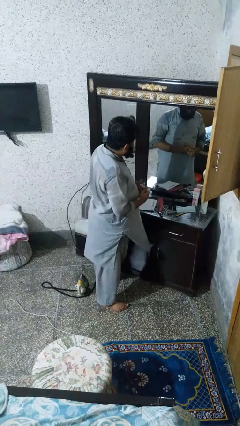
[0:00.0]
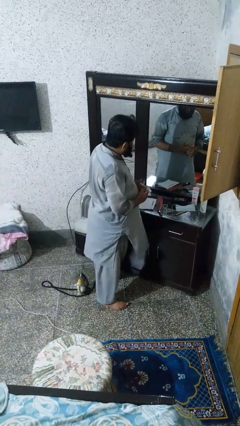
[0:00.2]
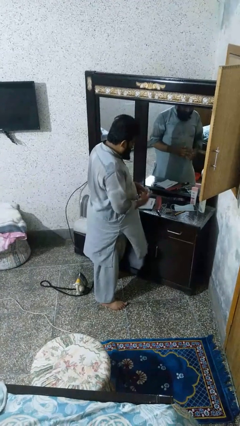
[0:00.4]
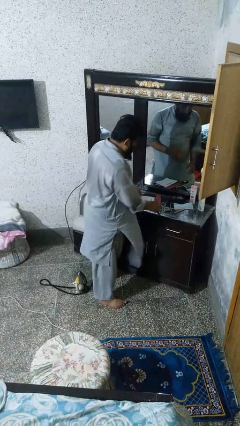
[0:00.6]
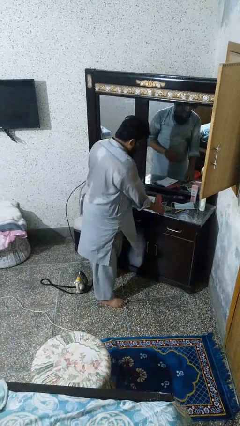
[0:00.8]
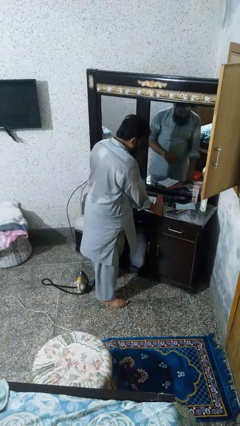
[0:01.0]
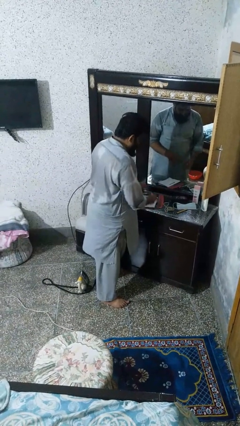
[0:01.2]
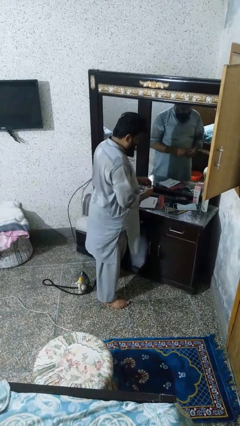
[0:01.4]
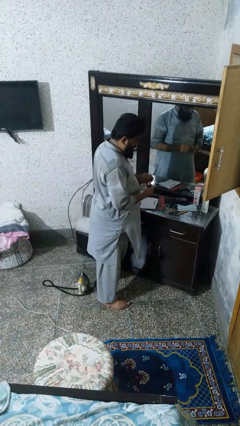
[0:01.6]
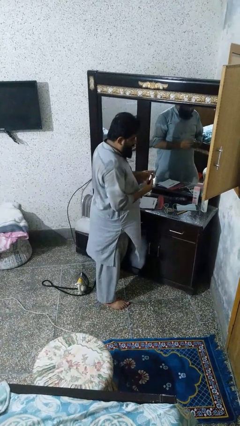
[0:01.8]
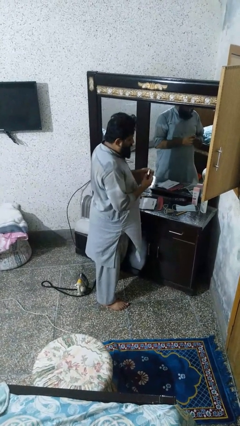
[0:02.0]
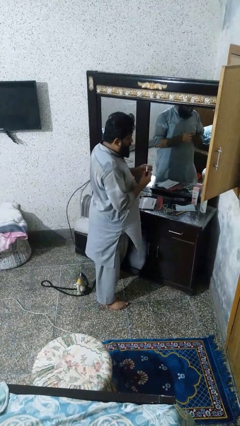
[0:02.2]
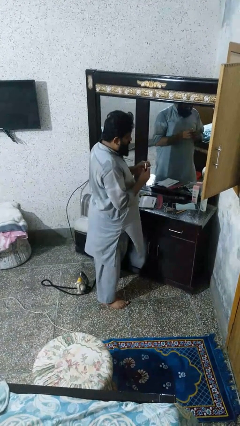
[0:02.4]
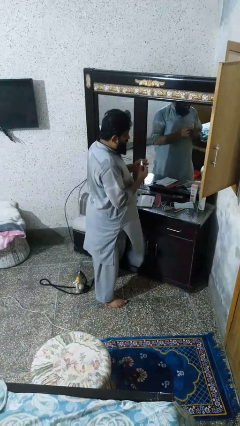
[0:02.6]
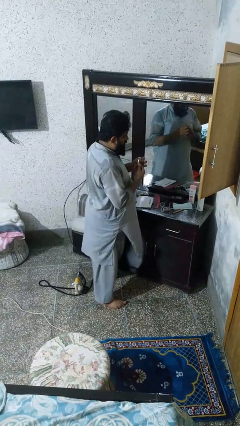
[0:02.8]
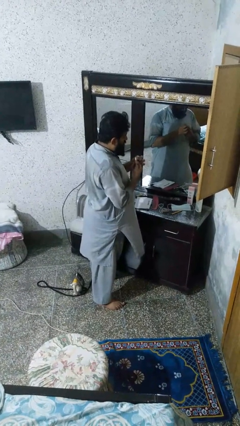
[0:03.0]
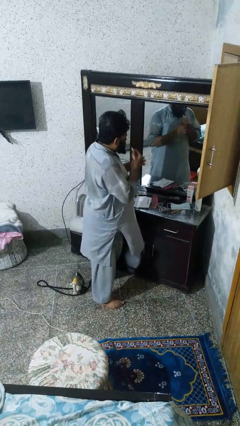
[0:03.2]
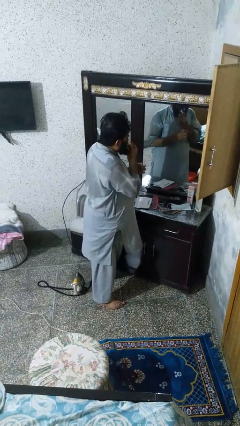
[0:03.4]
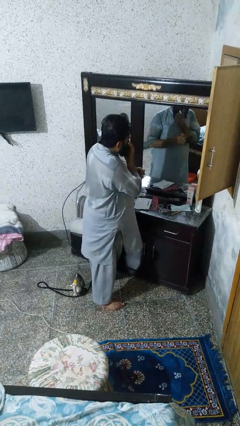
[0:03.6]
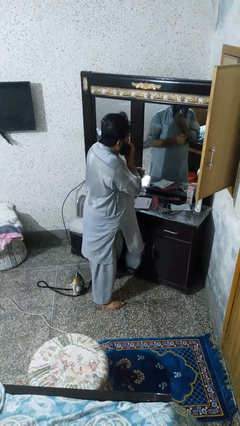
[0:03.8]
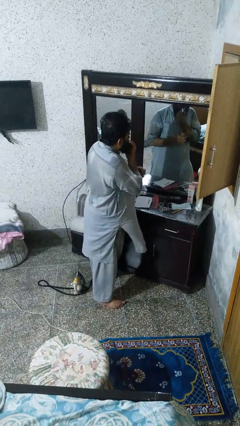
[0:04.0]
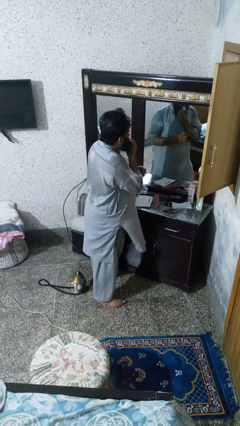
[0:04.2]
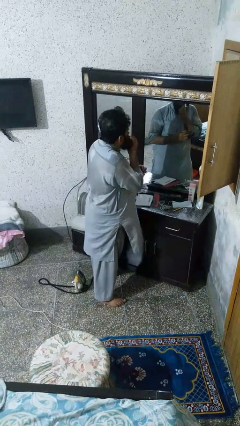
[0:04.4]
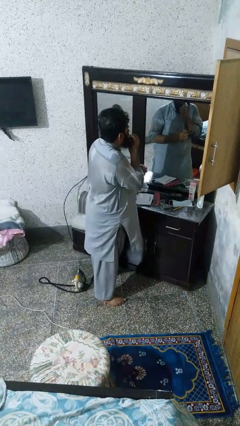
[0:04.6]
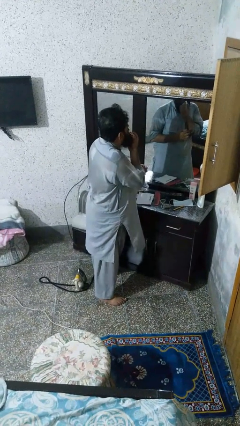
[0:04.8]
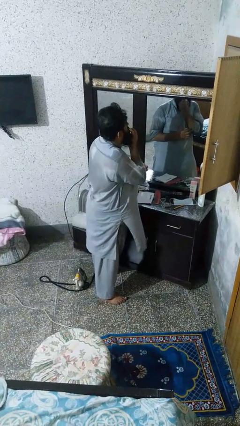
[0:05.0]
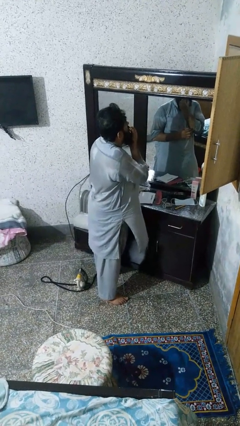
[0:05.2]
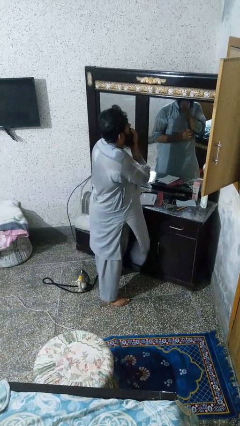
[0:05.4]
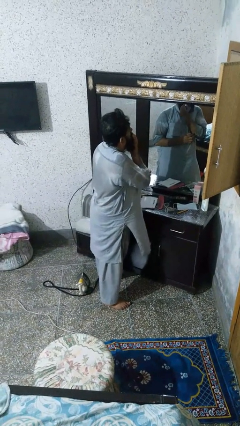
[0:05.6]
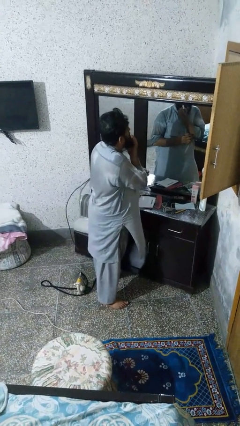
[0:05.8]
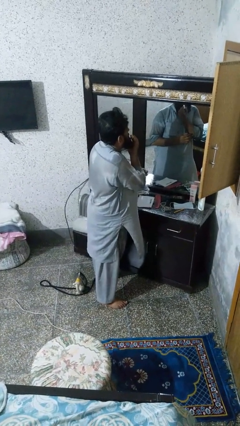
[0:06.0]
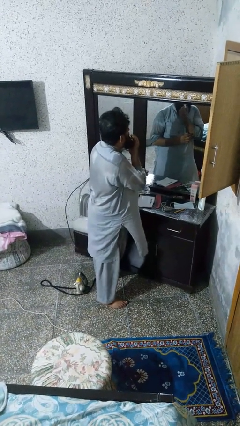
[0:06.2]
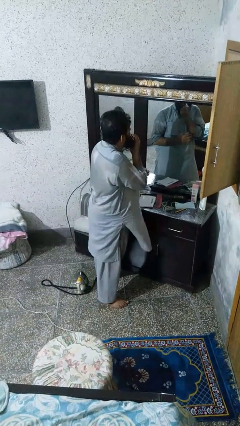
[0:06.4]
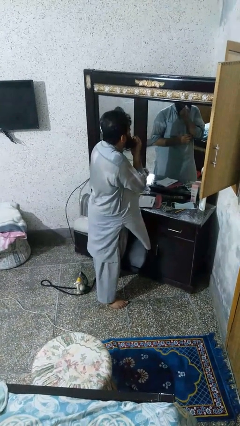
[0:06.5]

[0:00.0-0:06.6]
person applies lip makeup

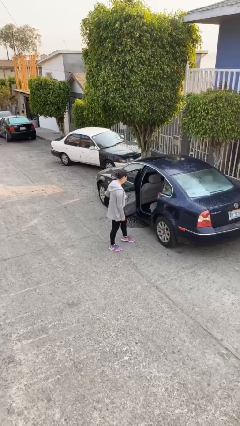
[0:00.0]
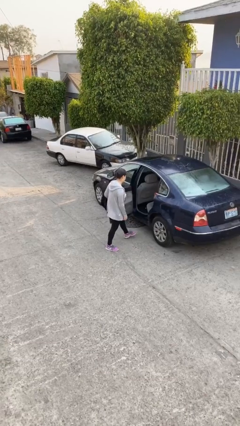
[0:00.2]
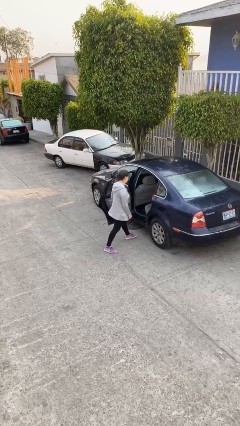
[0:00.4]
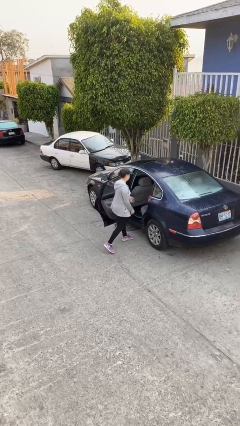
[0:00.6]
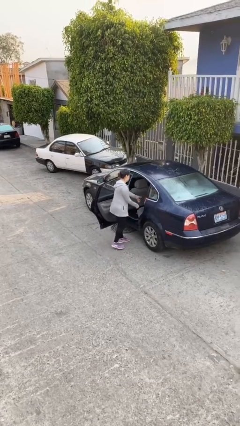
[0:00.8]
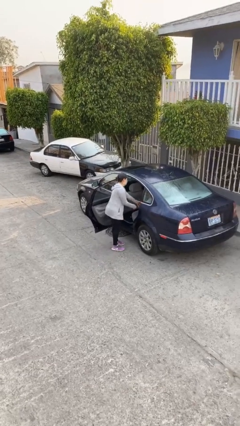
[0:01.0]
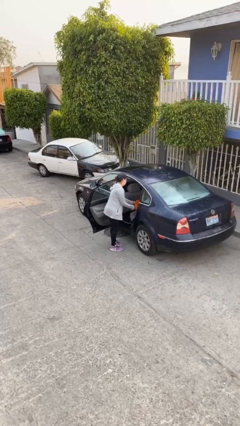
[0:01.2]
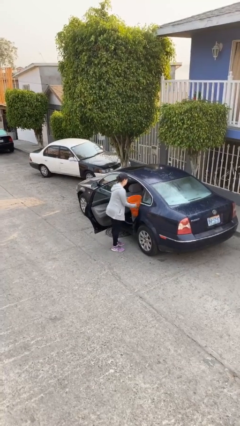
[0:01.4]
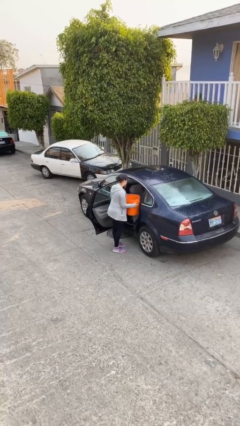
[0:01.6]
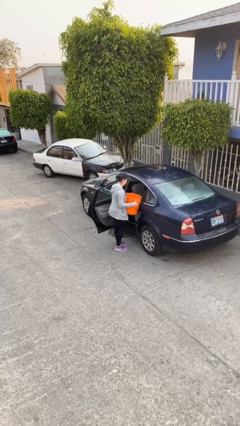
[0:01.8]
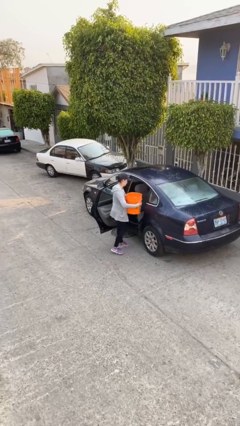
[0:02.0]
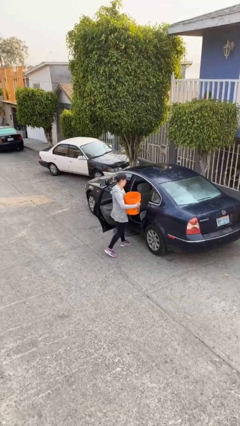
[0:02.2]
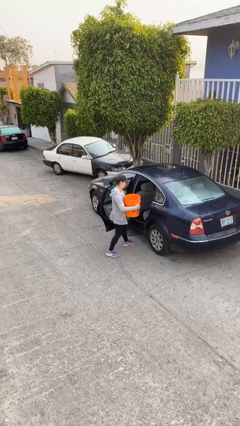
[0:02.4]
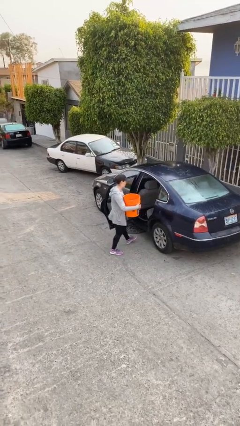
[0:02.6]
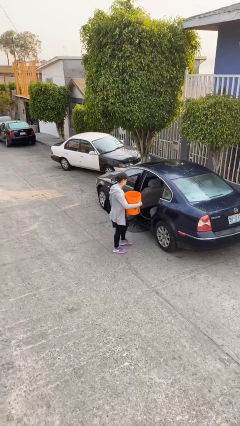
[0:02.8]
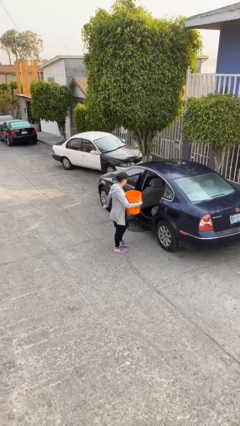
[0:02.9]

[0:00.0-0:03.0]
person unloads car

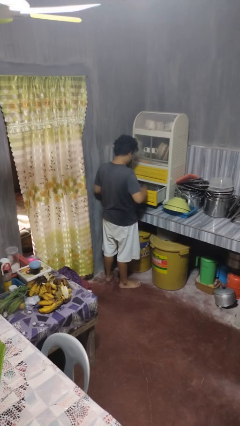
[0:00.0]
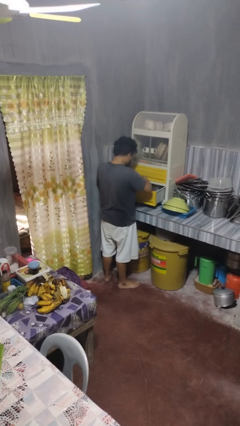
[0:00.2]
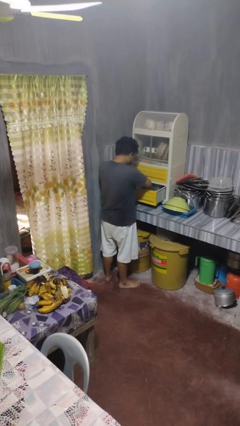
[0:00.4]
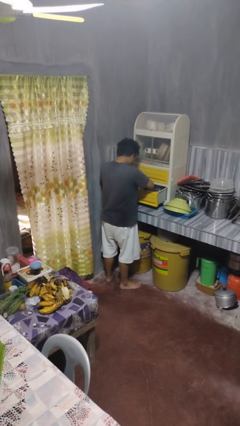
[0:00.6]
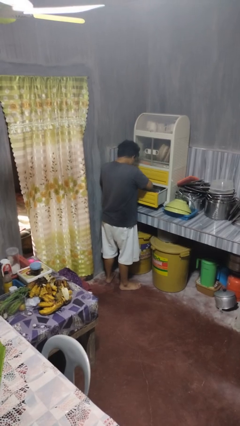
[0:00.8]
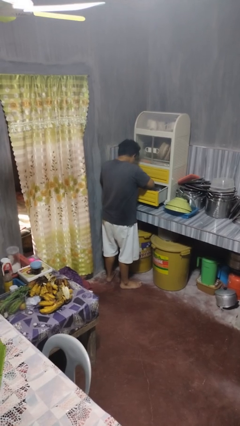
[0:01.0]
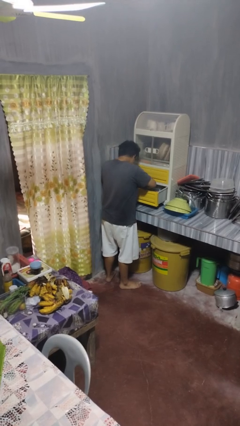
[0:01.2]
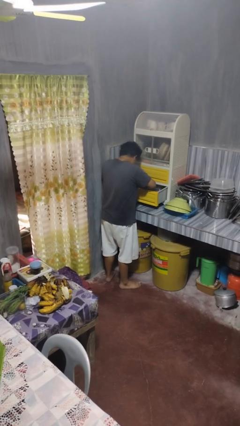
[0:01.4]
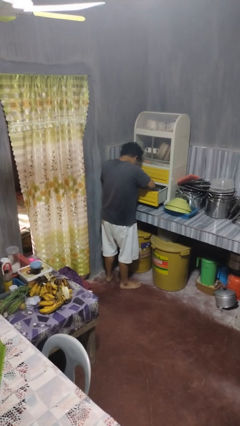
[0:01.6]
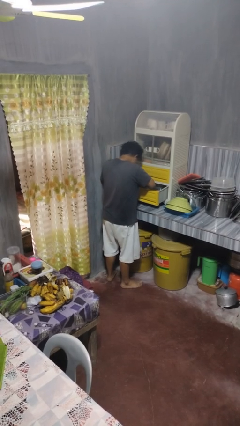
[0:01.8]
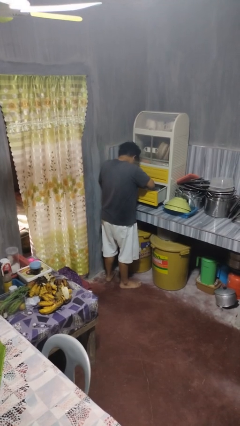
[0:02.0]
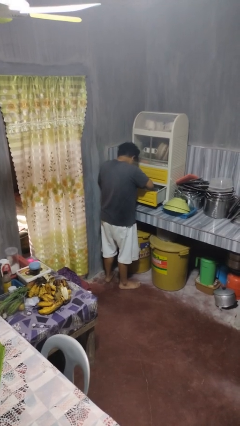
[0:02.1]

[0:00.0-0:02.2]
person searches in kitchen drawer

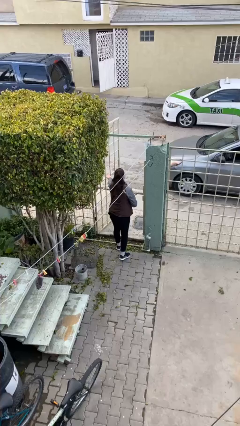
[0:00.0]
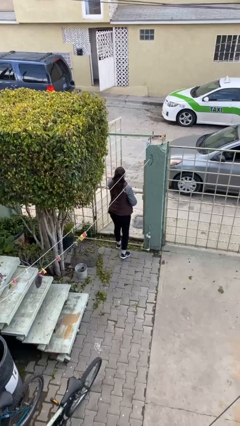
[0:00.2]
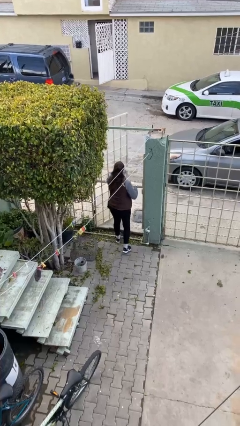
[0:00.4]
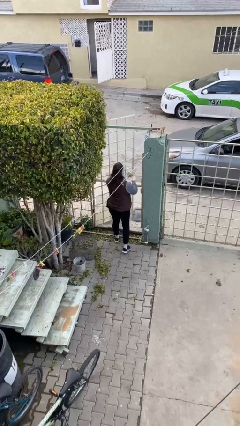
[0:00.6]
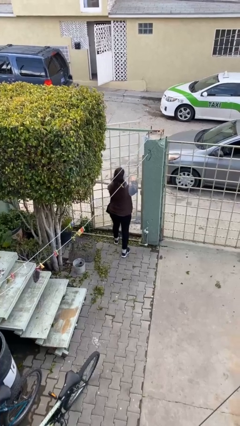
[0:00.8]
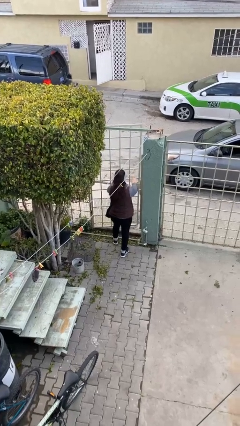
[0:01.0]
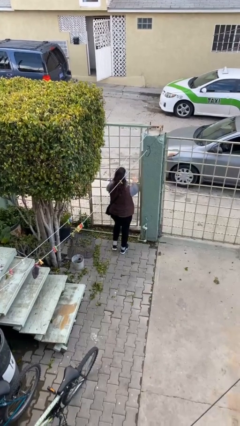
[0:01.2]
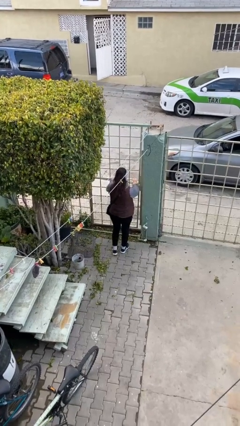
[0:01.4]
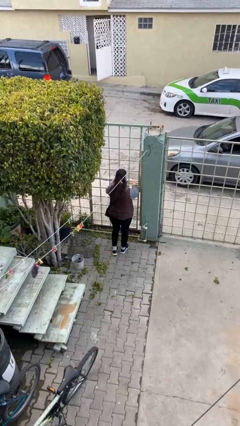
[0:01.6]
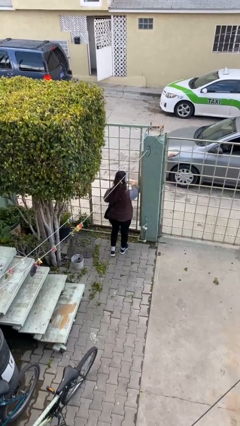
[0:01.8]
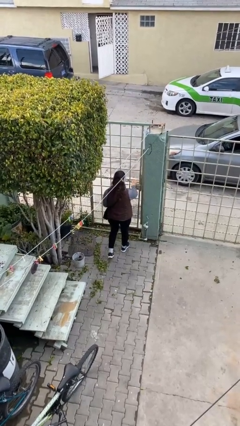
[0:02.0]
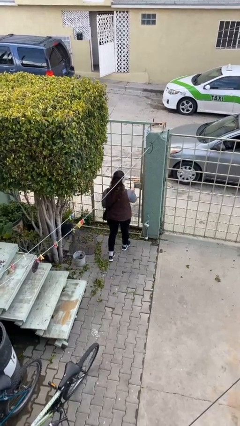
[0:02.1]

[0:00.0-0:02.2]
person closes facility door

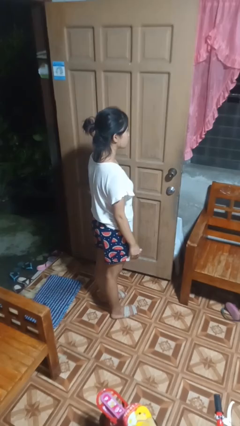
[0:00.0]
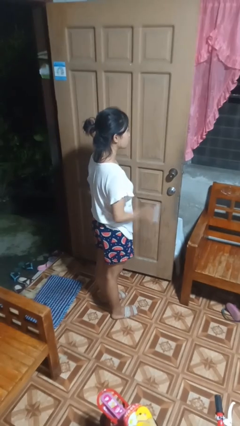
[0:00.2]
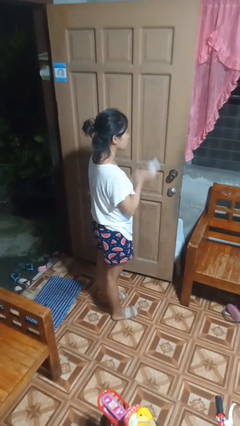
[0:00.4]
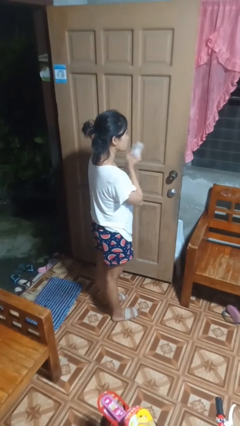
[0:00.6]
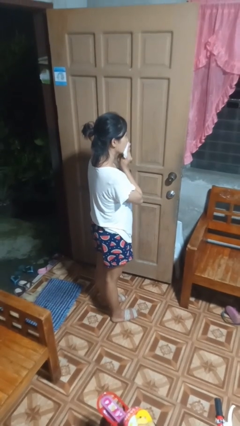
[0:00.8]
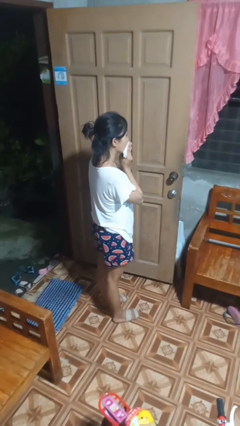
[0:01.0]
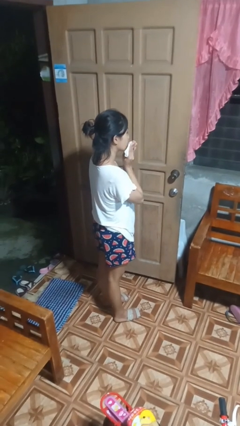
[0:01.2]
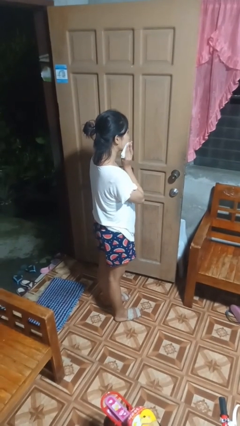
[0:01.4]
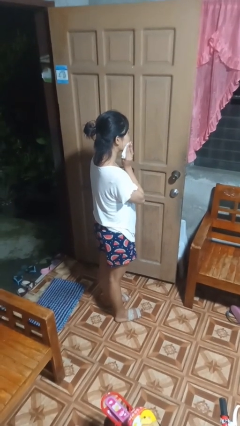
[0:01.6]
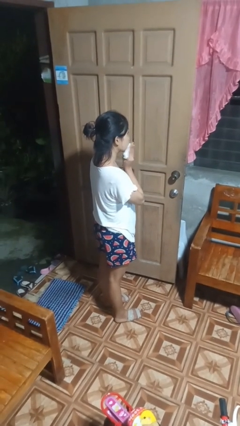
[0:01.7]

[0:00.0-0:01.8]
person wipes mouth with napkin

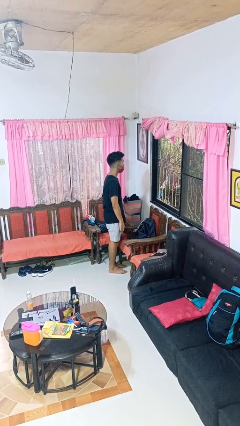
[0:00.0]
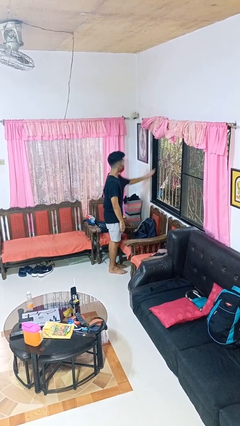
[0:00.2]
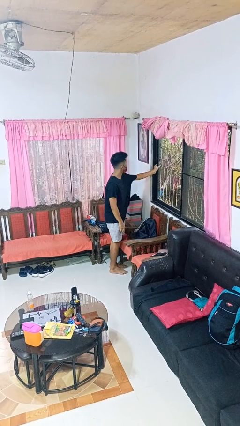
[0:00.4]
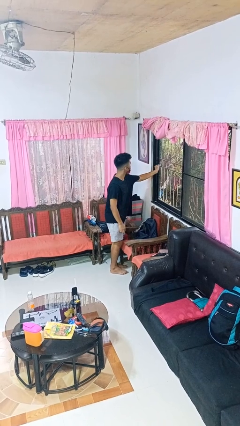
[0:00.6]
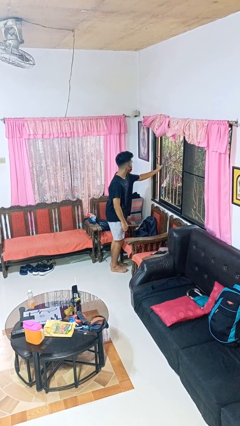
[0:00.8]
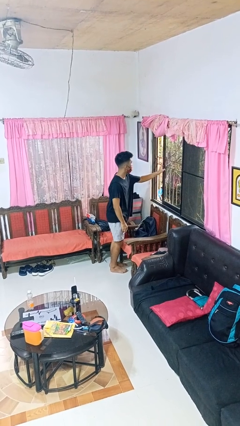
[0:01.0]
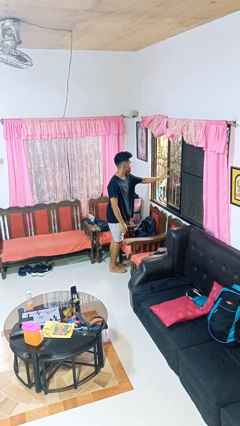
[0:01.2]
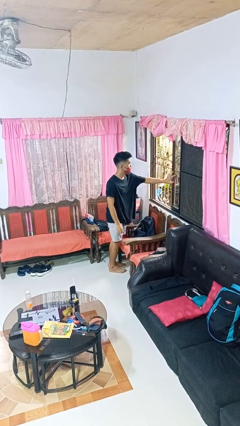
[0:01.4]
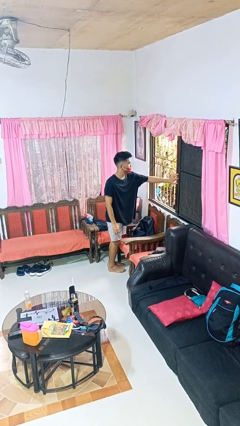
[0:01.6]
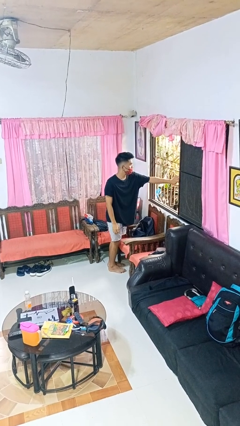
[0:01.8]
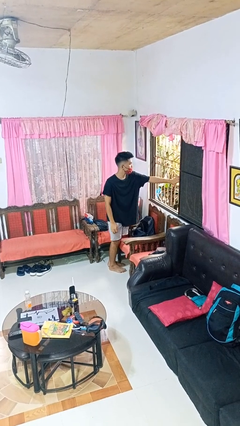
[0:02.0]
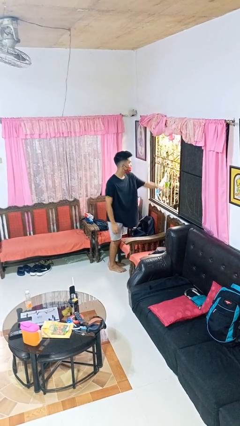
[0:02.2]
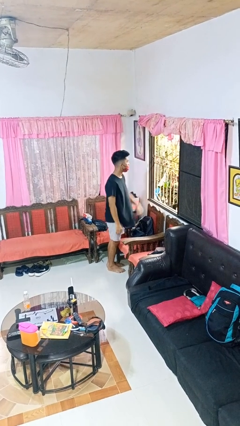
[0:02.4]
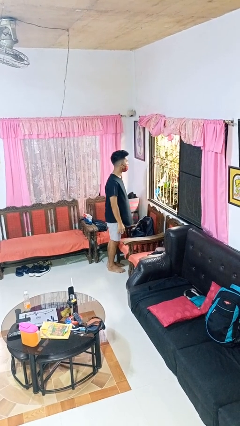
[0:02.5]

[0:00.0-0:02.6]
person opens home window
